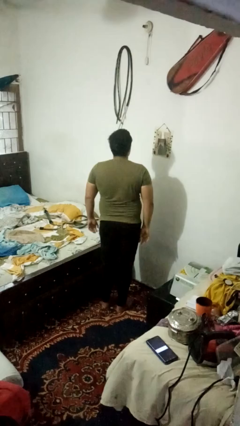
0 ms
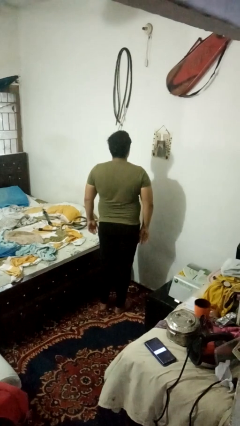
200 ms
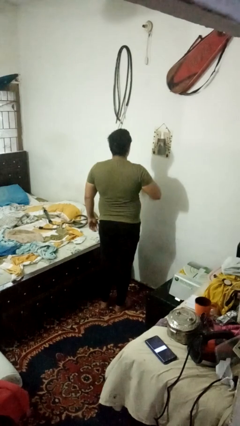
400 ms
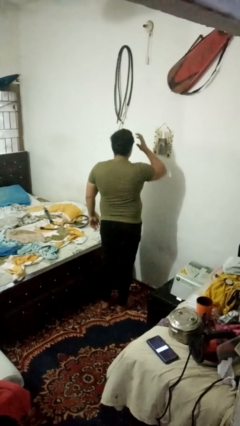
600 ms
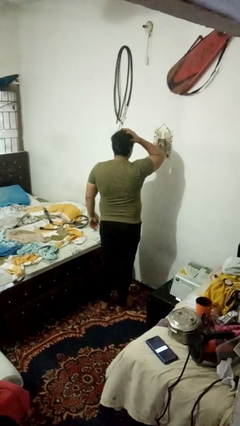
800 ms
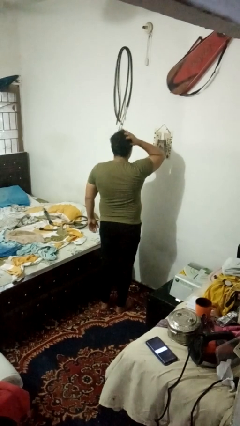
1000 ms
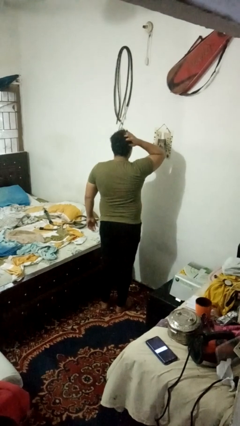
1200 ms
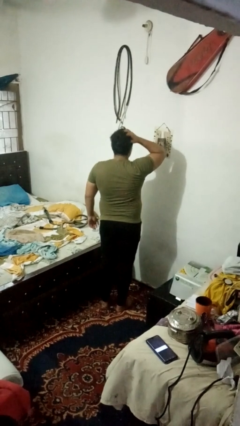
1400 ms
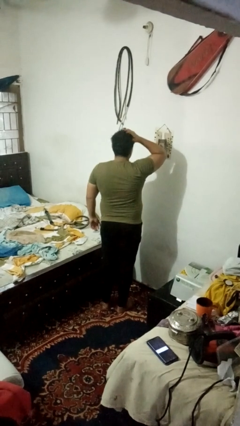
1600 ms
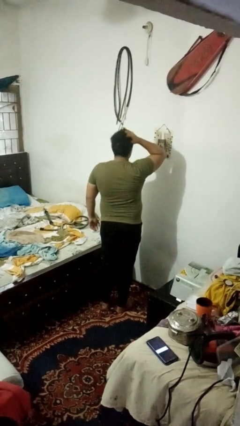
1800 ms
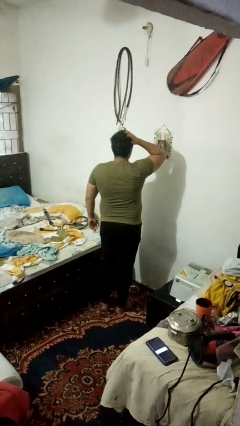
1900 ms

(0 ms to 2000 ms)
person strokes hair

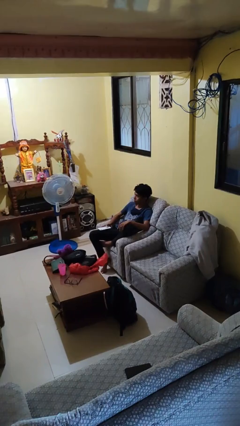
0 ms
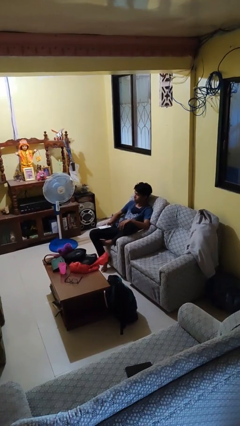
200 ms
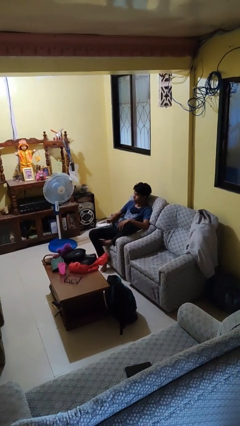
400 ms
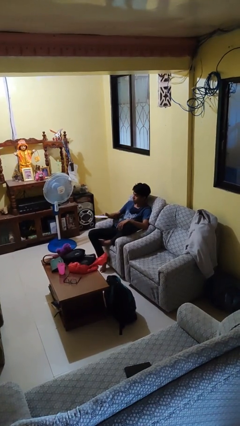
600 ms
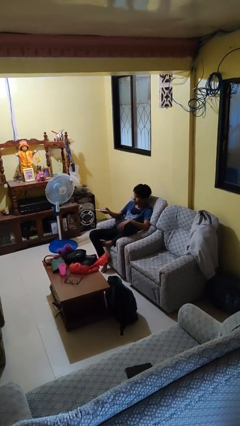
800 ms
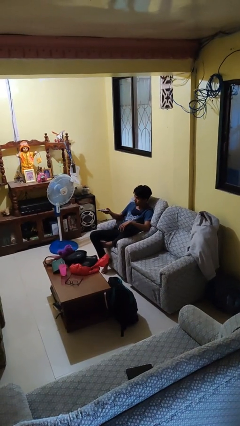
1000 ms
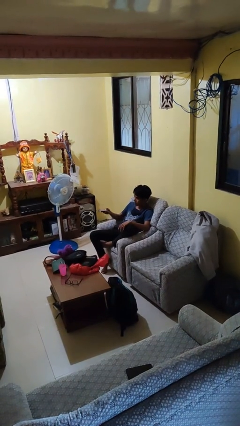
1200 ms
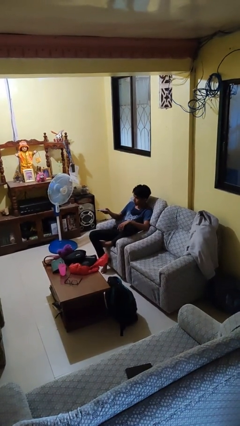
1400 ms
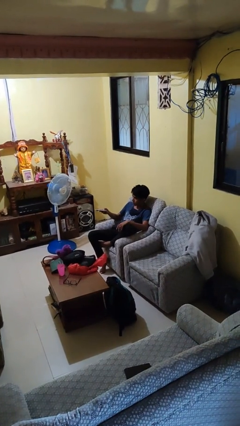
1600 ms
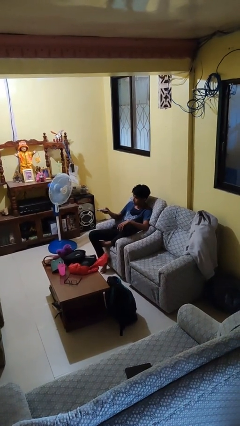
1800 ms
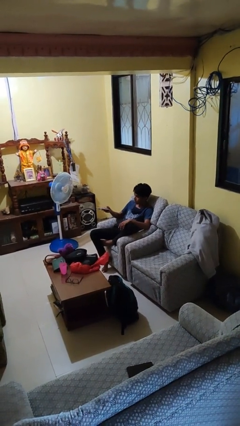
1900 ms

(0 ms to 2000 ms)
person uses television remote

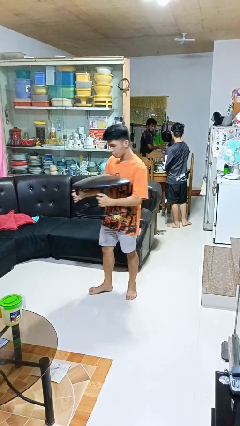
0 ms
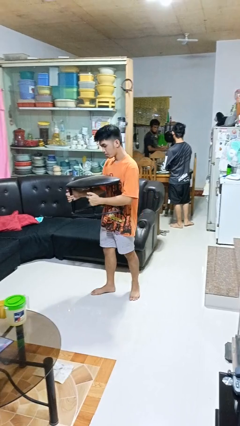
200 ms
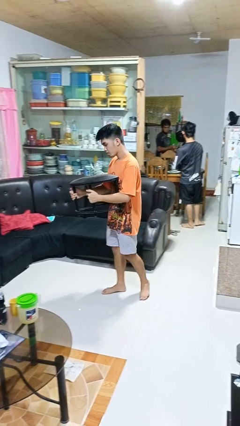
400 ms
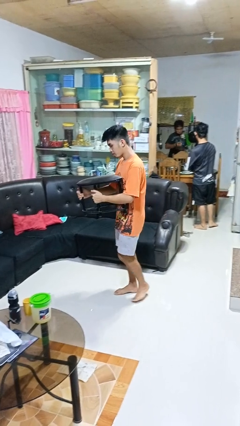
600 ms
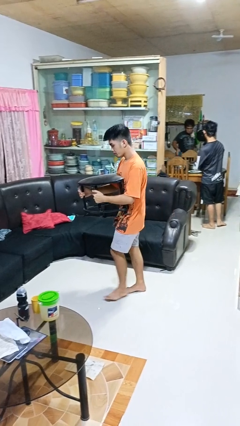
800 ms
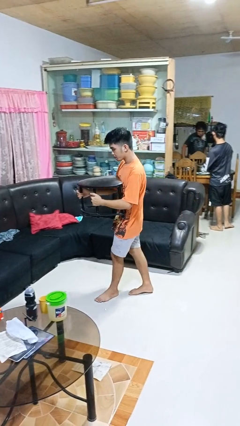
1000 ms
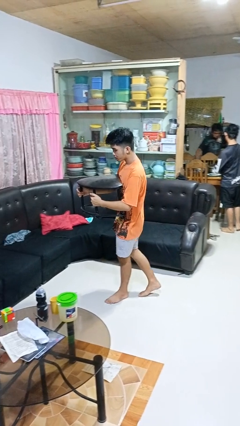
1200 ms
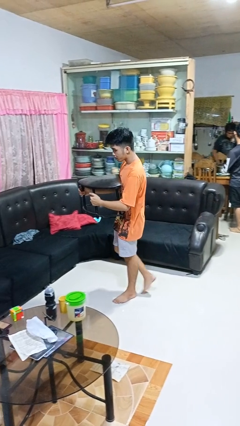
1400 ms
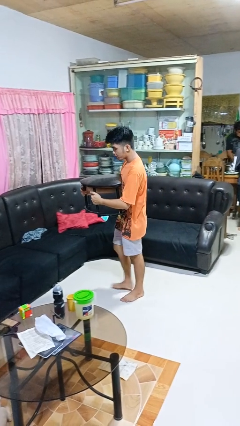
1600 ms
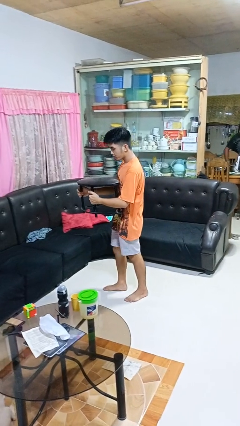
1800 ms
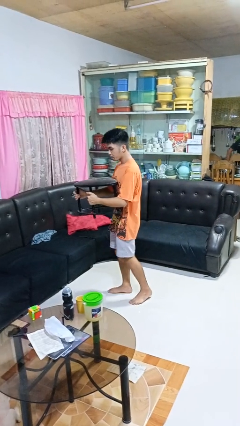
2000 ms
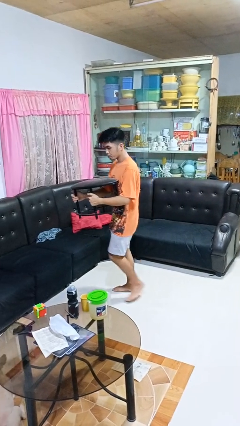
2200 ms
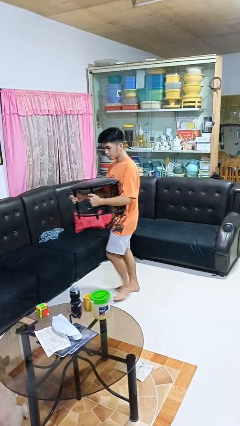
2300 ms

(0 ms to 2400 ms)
person carries furniture

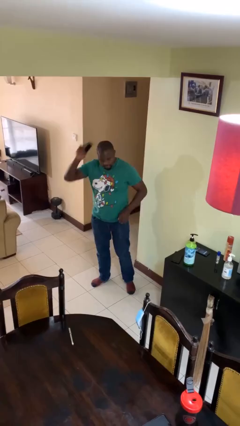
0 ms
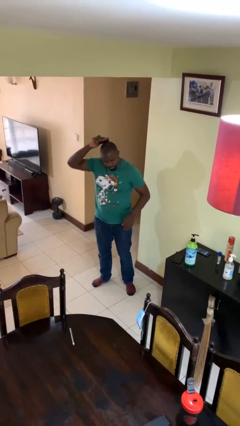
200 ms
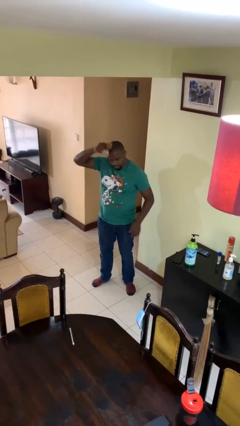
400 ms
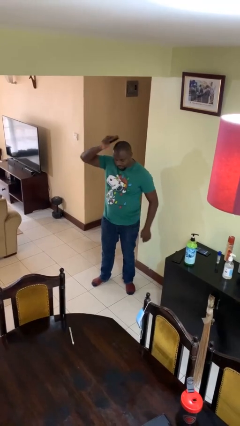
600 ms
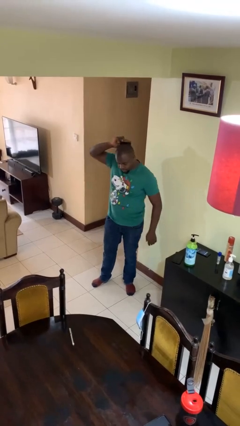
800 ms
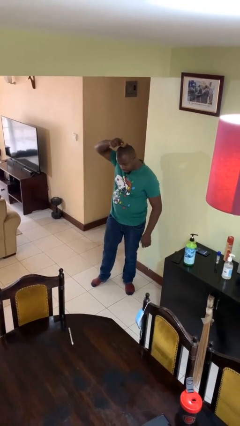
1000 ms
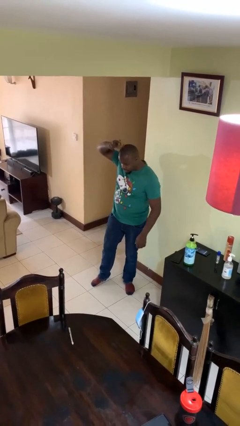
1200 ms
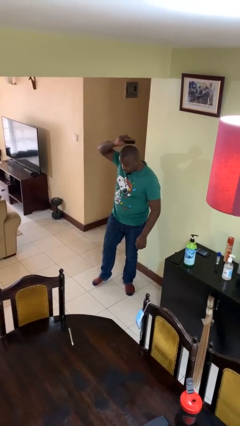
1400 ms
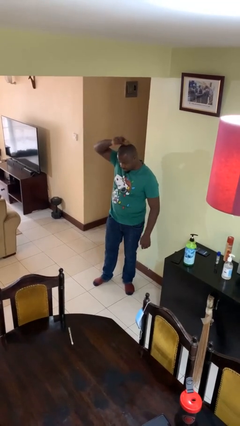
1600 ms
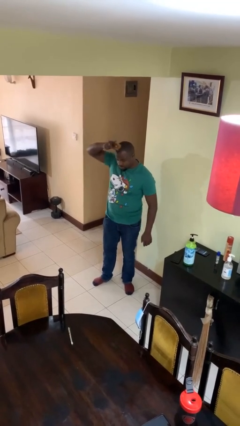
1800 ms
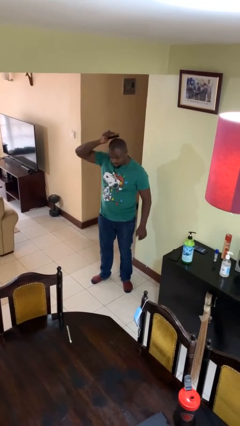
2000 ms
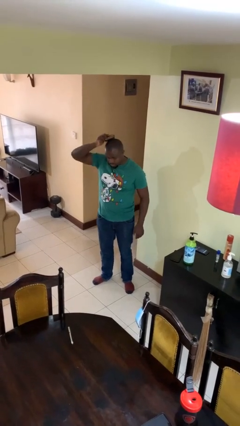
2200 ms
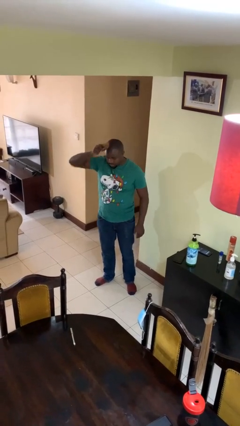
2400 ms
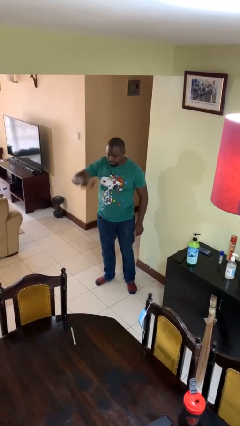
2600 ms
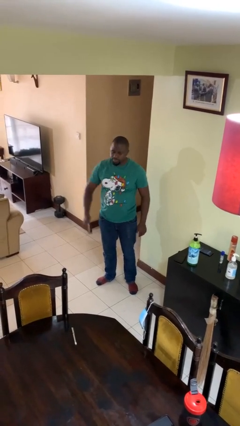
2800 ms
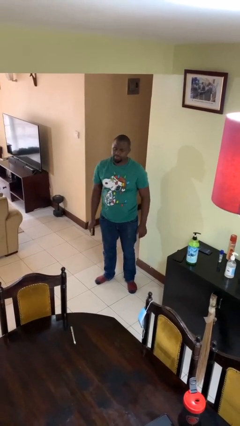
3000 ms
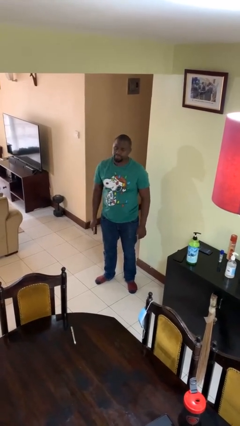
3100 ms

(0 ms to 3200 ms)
person brushes hair

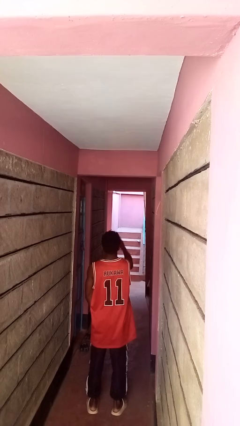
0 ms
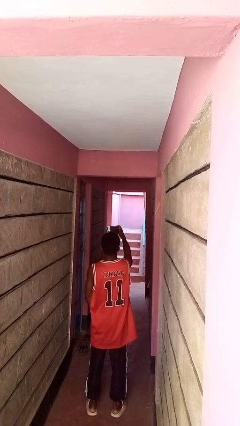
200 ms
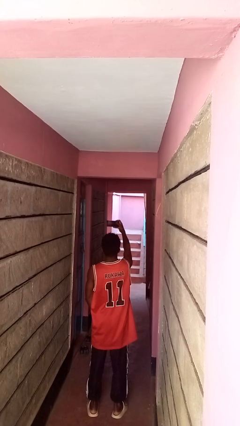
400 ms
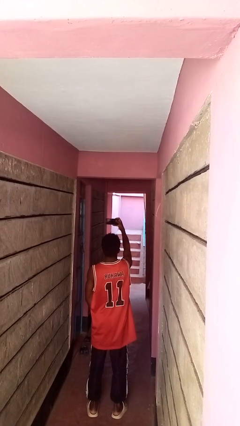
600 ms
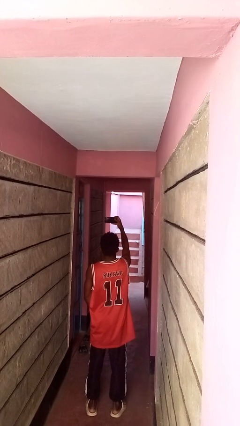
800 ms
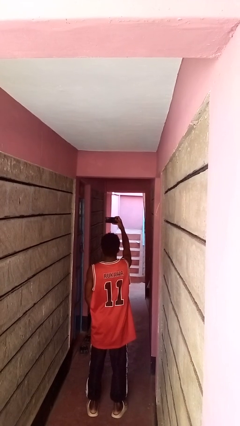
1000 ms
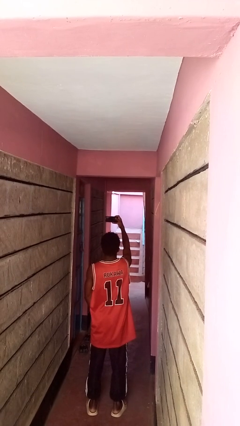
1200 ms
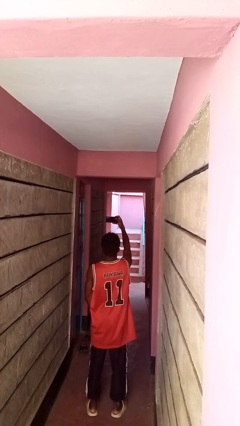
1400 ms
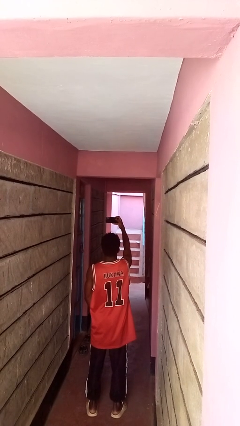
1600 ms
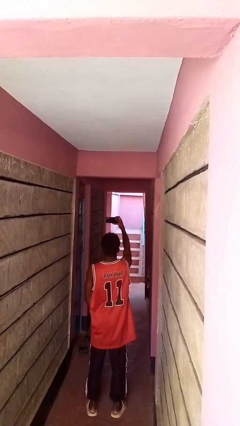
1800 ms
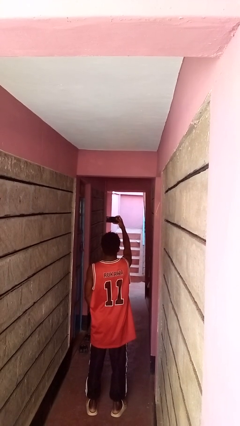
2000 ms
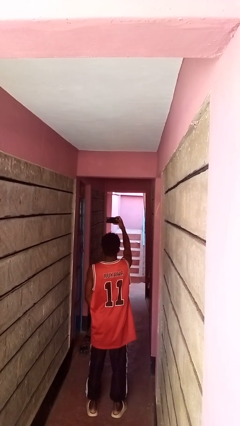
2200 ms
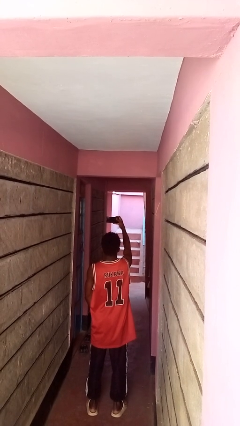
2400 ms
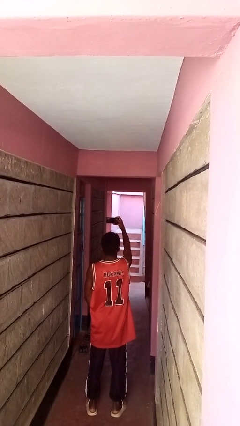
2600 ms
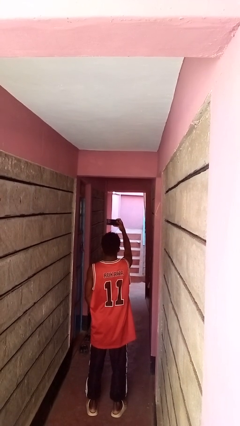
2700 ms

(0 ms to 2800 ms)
person takes selfie

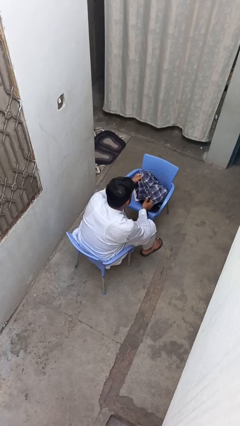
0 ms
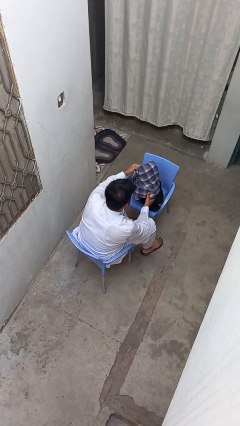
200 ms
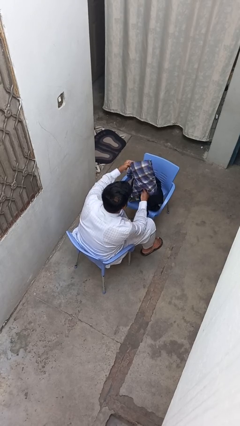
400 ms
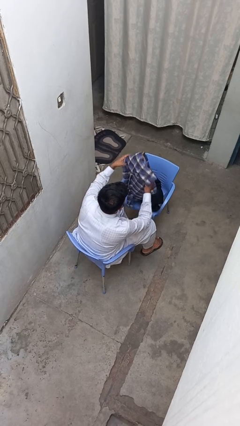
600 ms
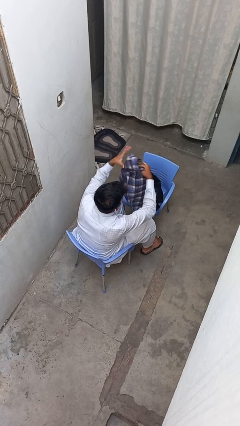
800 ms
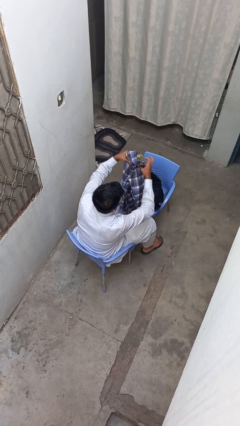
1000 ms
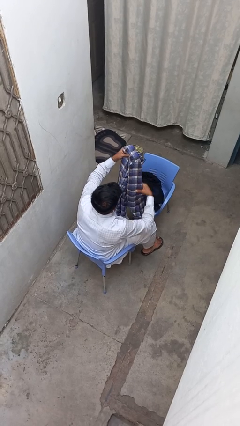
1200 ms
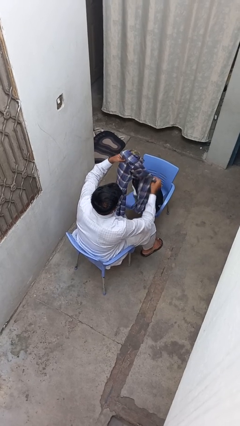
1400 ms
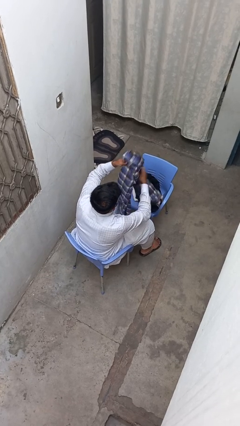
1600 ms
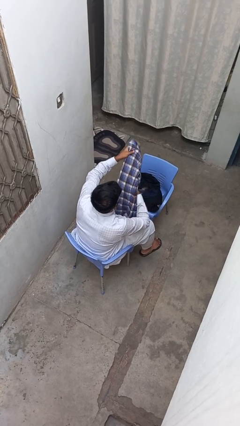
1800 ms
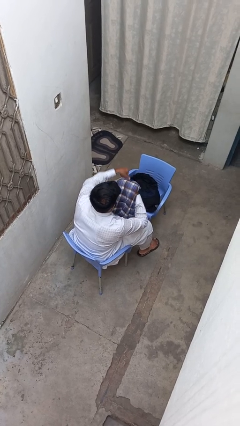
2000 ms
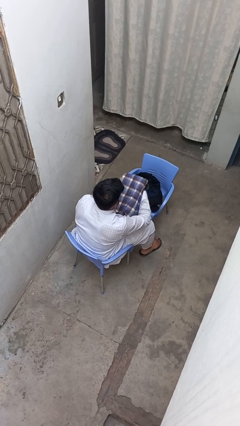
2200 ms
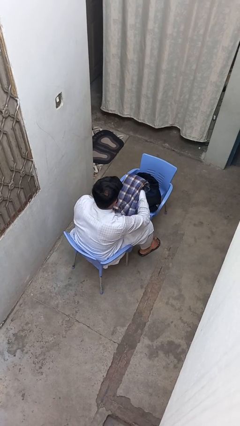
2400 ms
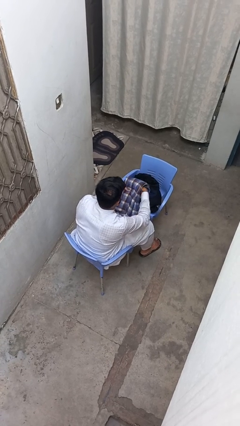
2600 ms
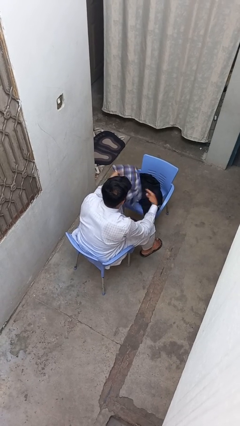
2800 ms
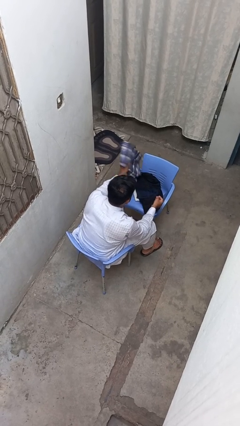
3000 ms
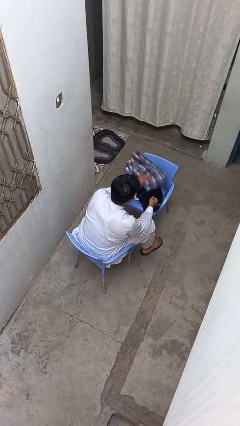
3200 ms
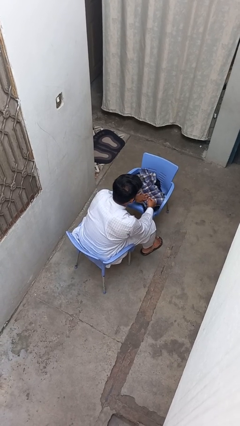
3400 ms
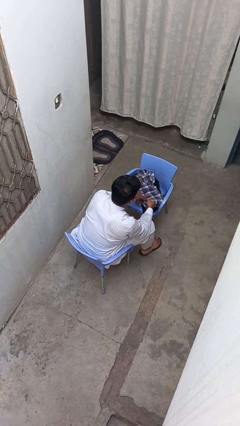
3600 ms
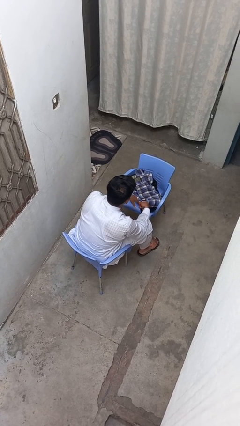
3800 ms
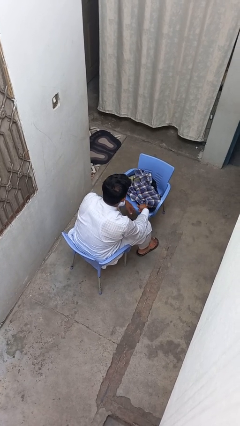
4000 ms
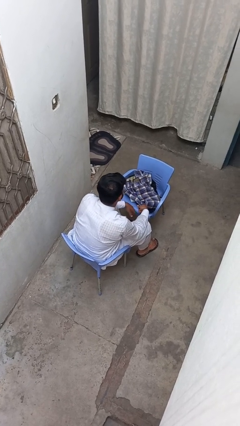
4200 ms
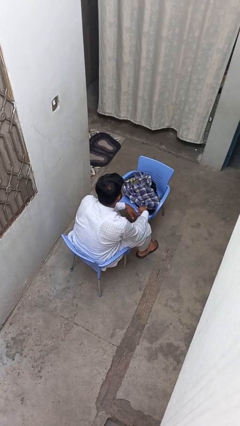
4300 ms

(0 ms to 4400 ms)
person folds shirt

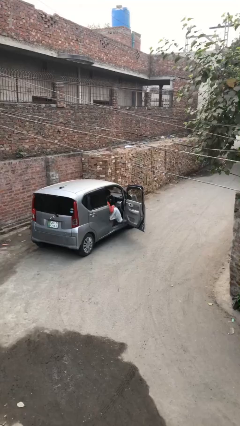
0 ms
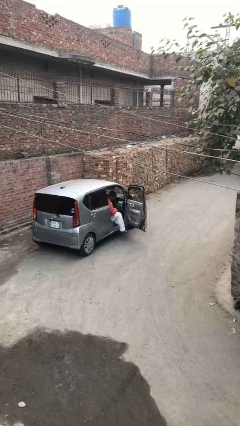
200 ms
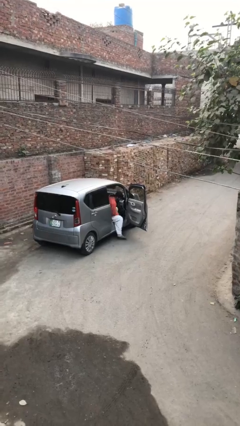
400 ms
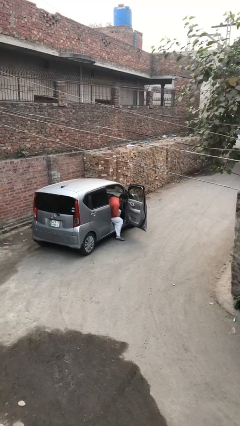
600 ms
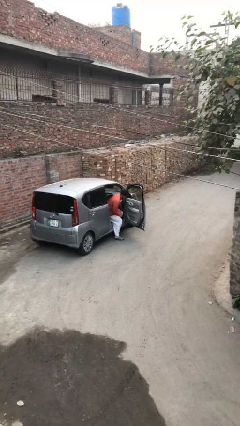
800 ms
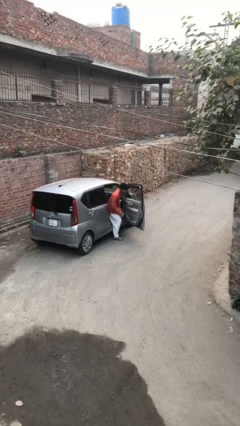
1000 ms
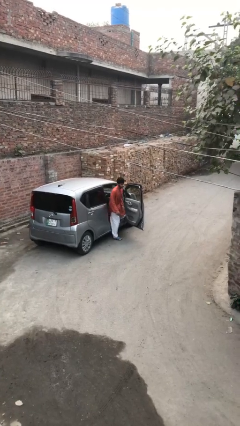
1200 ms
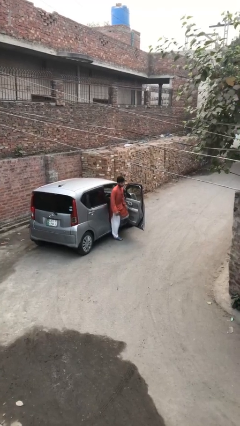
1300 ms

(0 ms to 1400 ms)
person exits car
